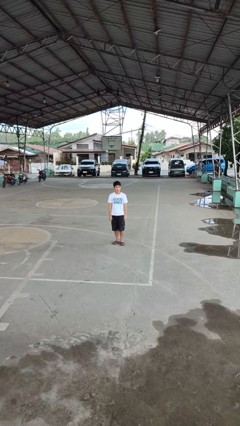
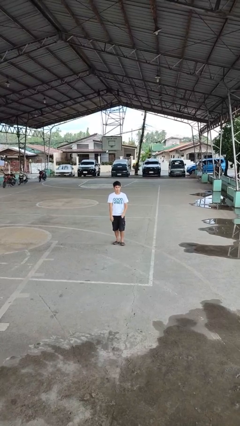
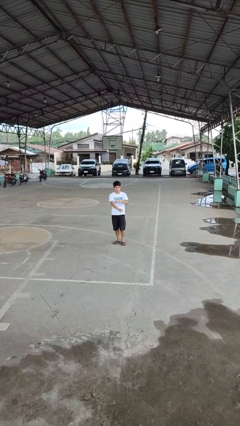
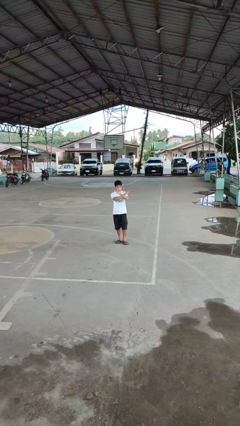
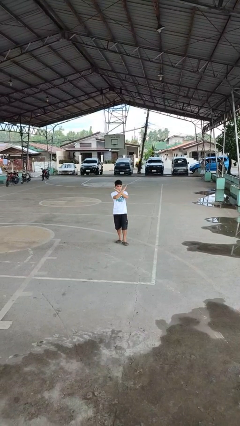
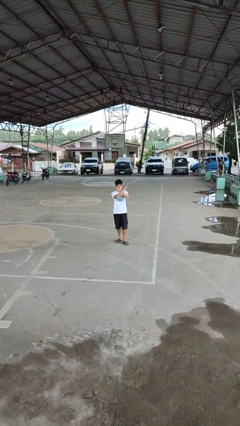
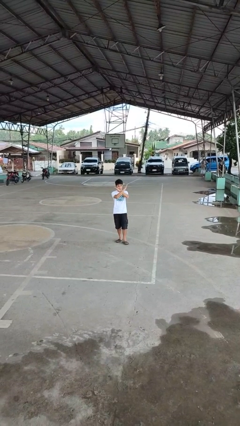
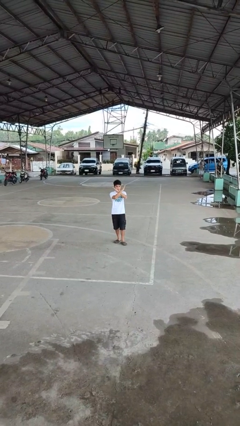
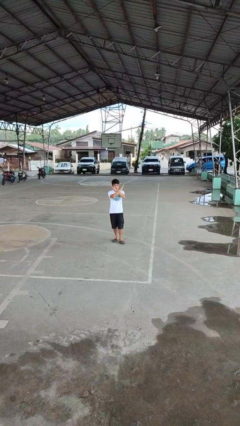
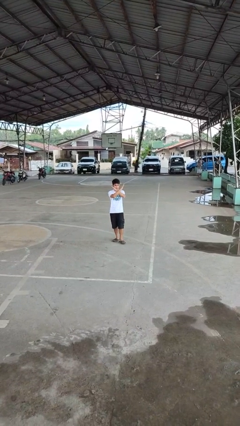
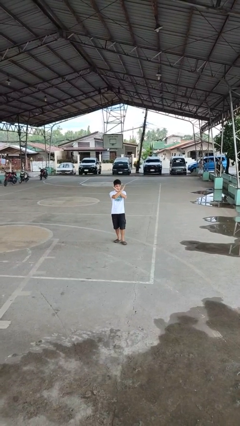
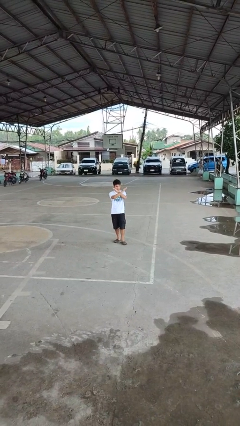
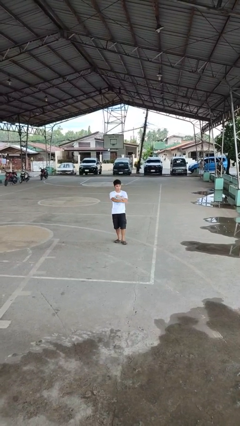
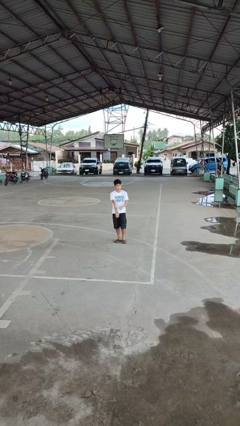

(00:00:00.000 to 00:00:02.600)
person gestures arms x

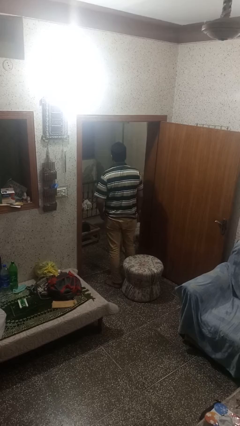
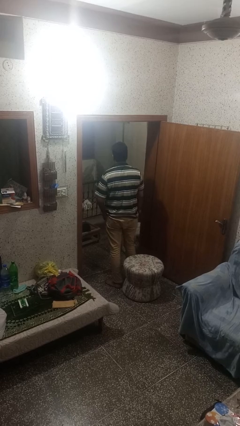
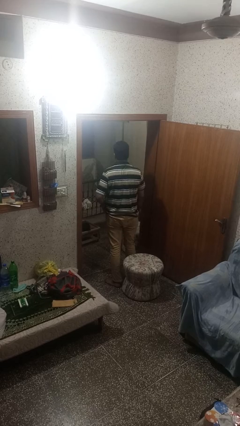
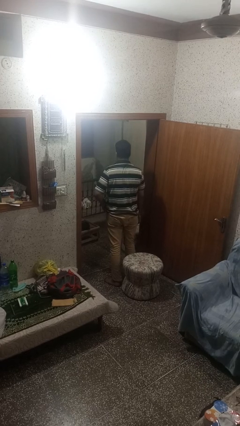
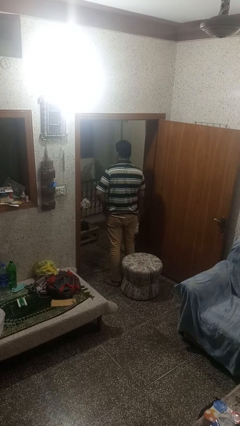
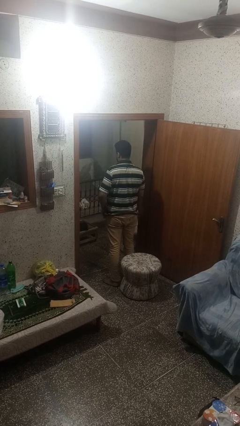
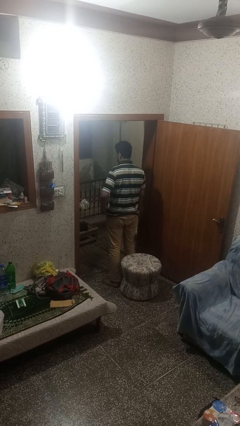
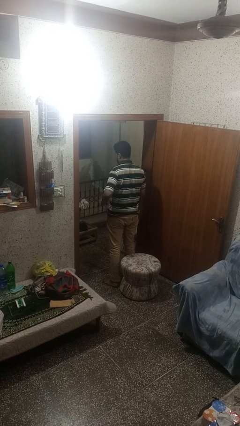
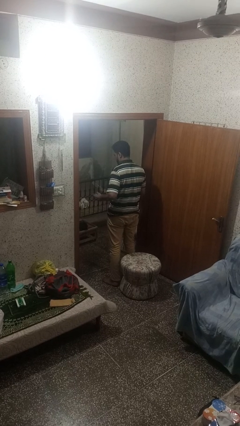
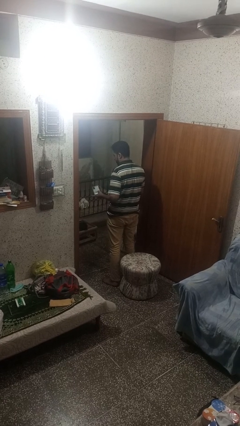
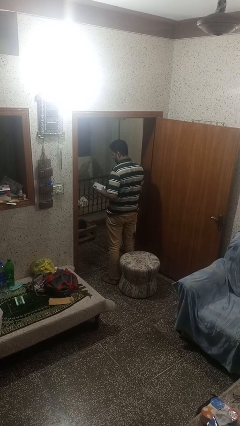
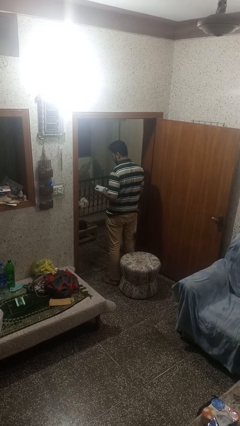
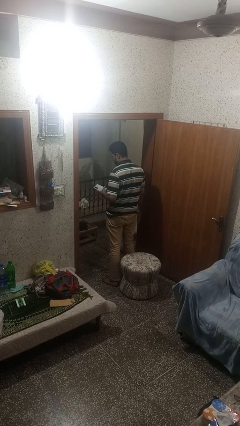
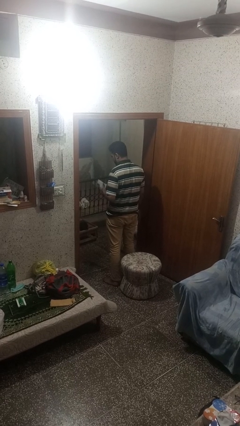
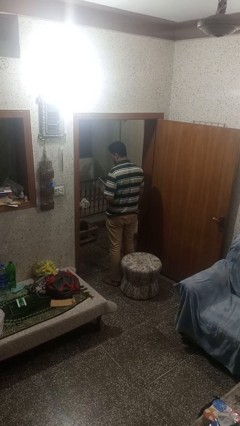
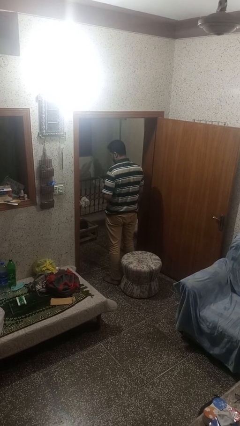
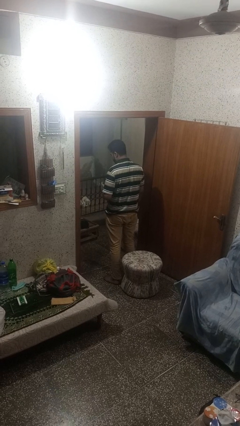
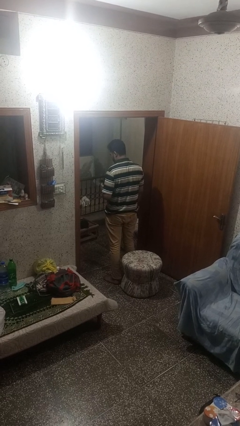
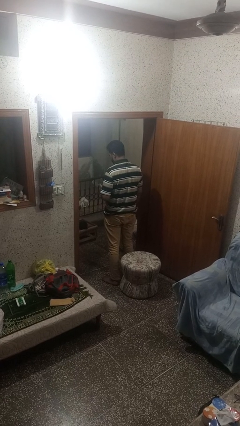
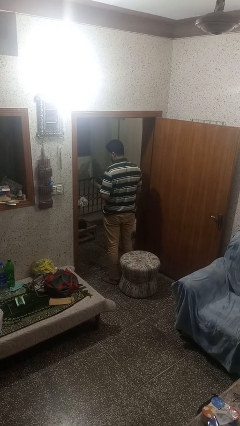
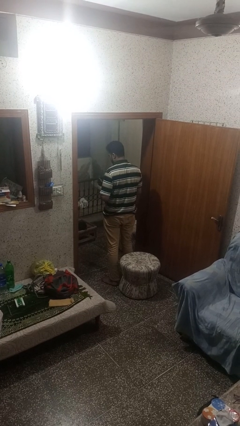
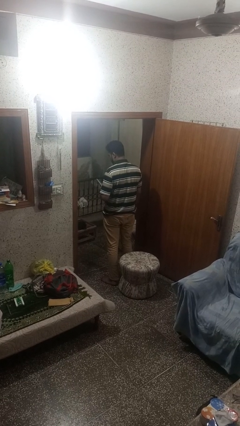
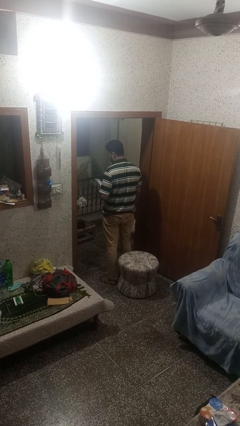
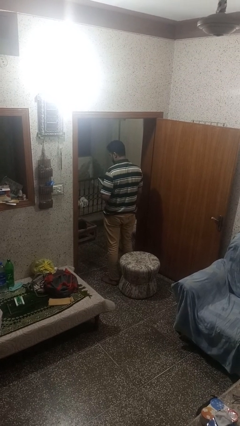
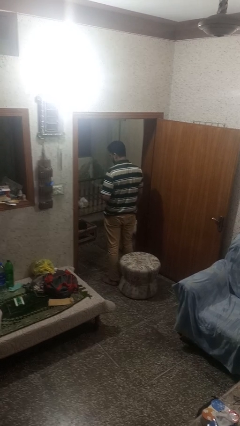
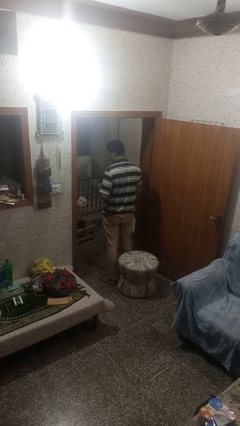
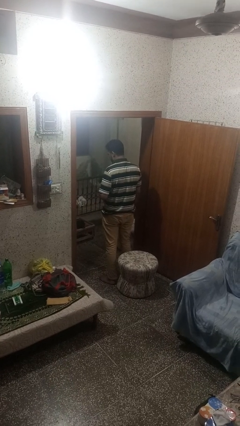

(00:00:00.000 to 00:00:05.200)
person takes phone from pocket

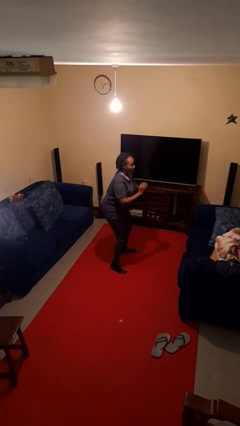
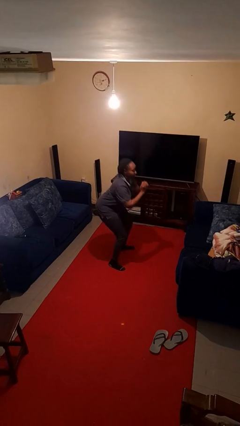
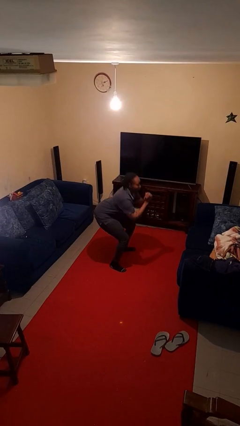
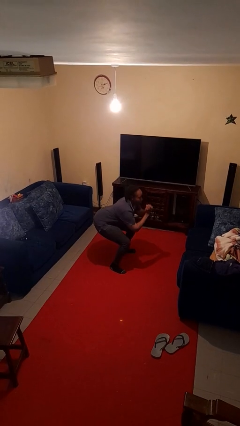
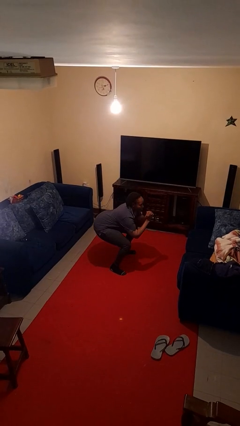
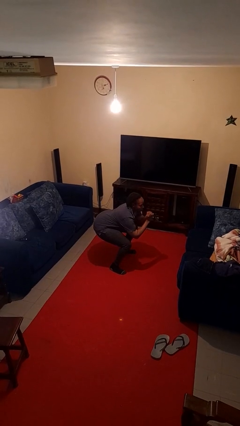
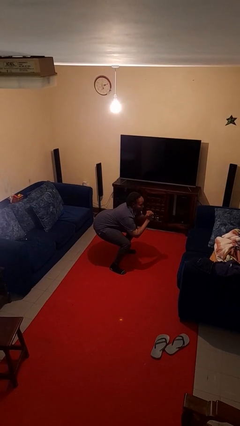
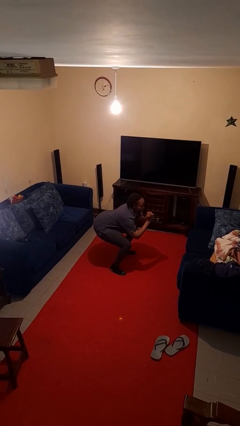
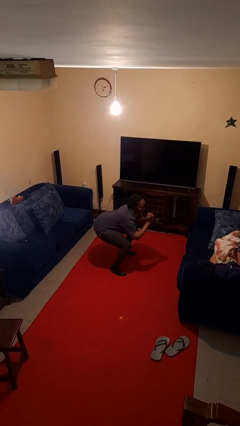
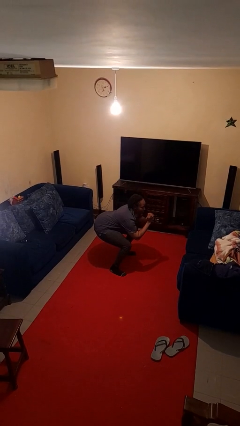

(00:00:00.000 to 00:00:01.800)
person squats

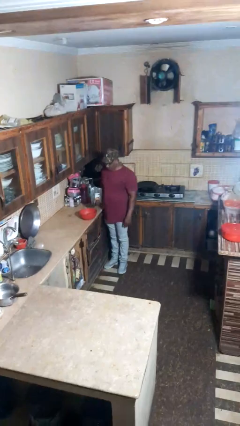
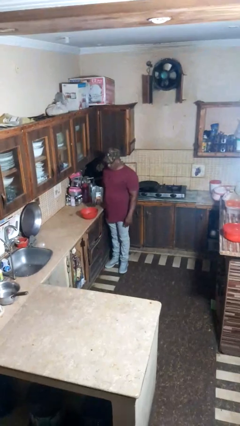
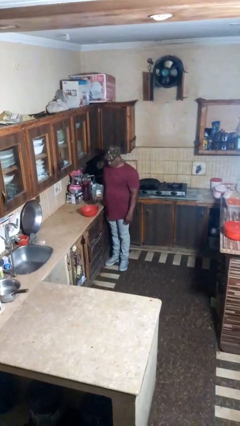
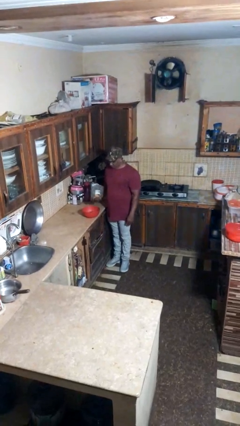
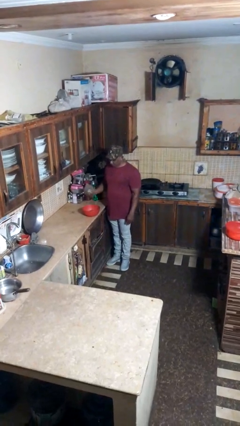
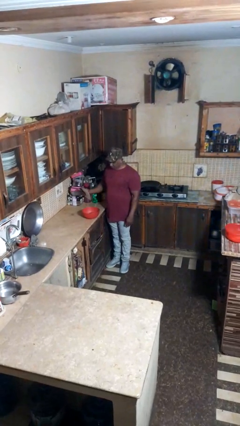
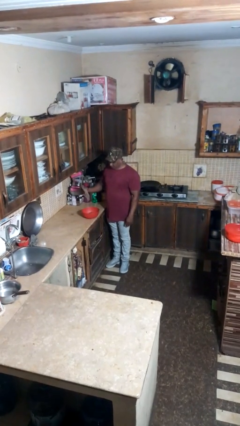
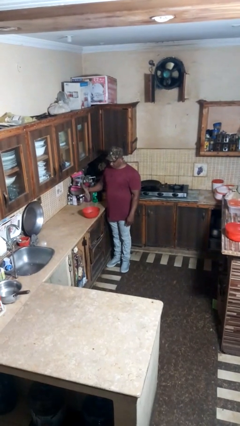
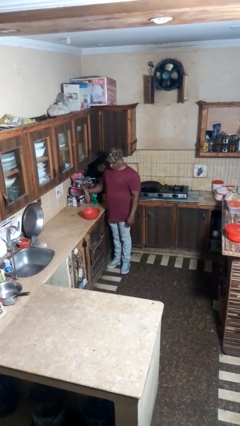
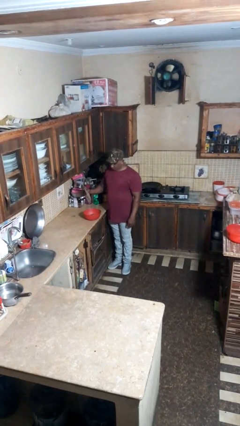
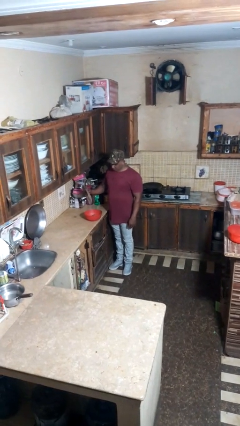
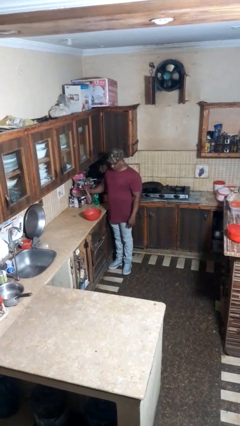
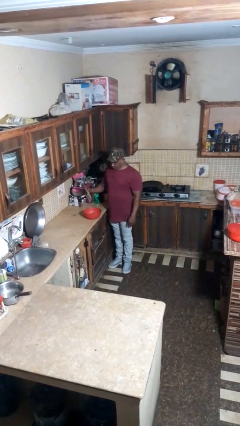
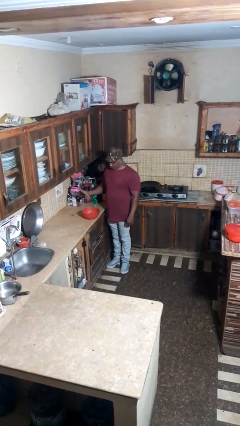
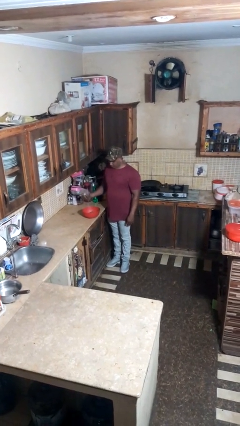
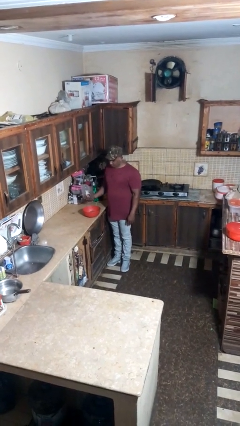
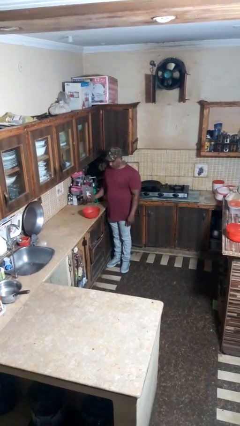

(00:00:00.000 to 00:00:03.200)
person pours into bowl

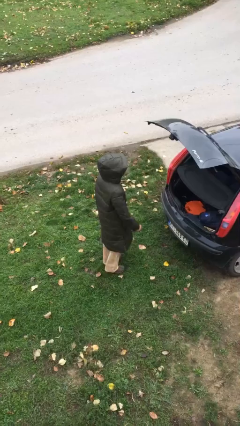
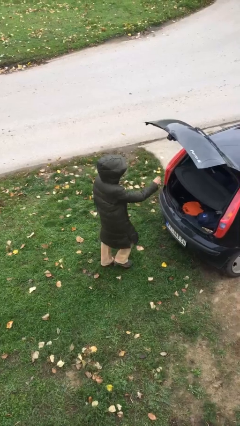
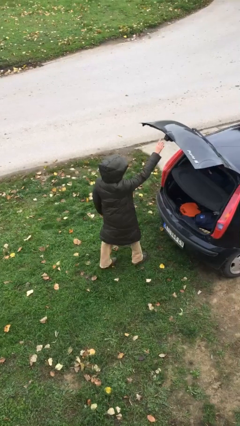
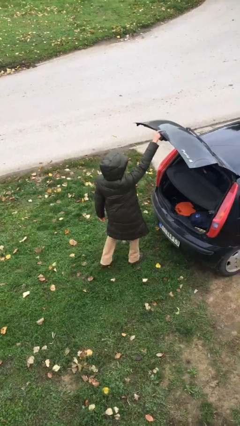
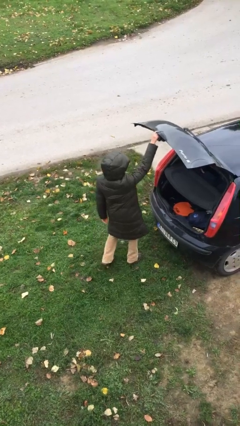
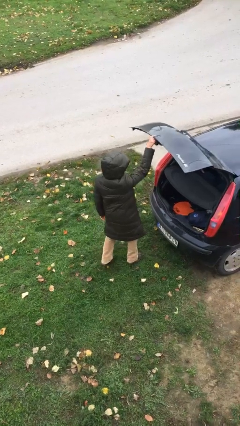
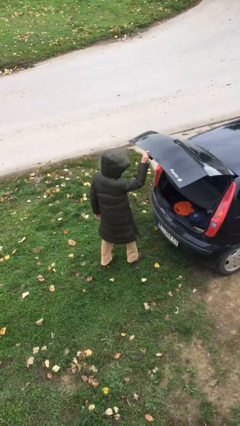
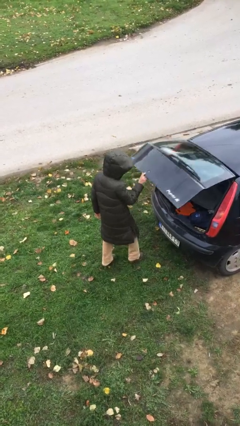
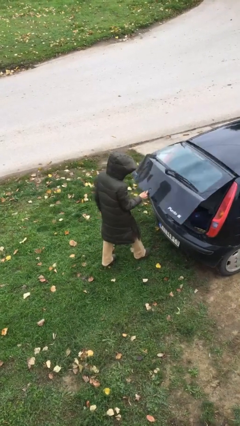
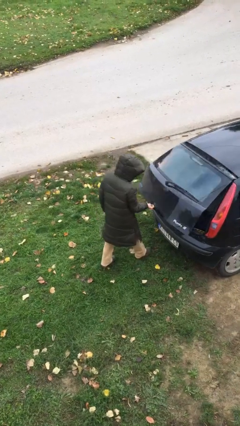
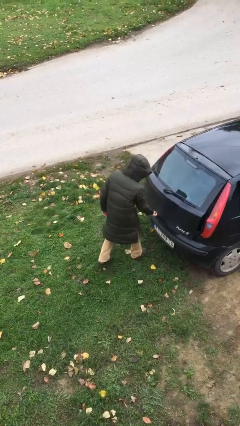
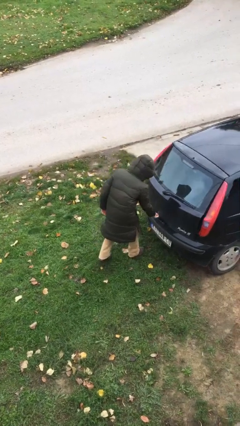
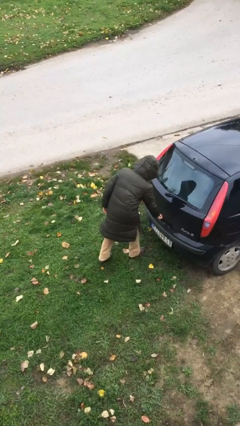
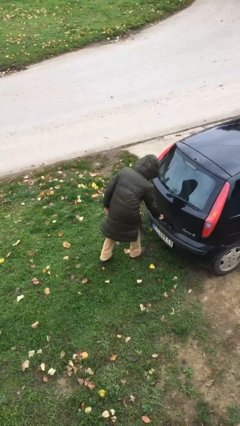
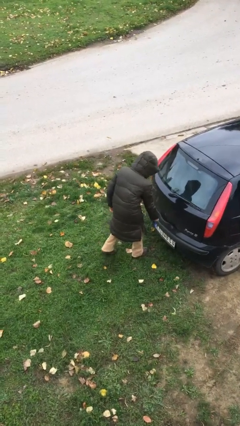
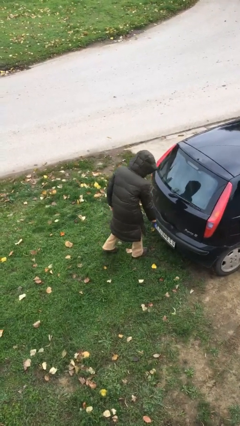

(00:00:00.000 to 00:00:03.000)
person closes car trunk

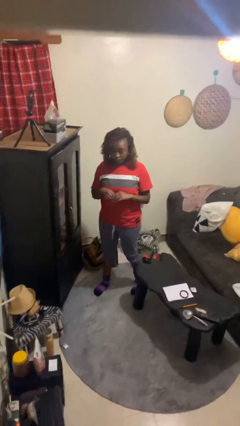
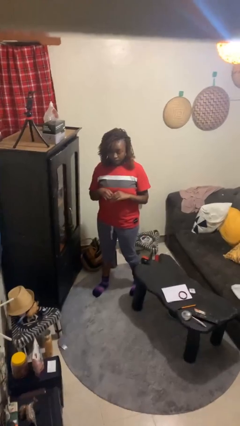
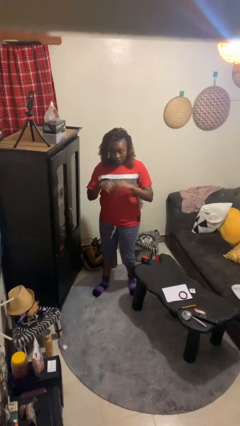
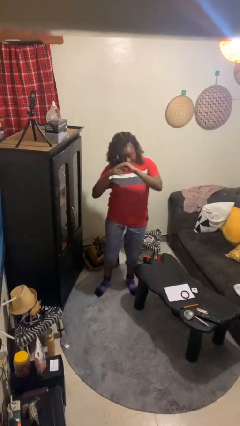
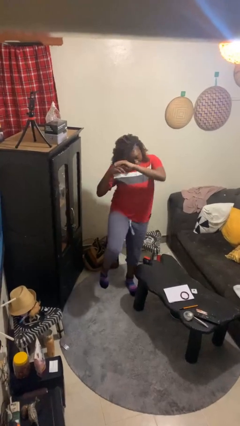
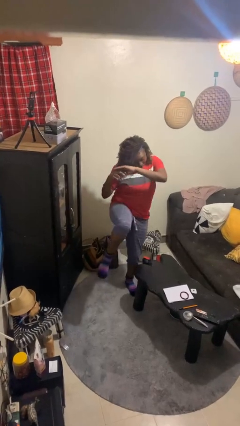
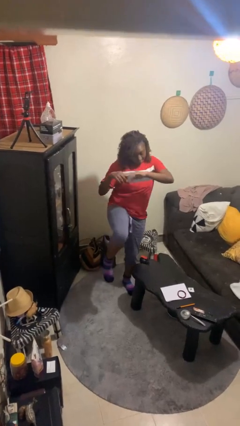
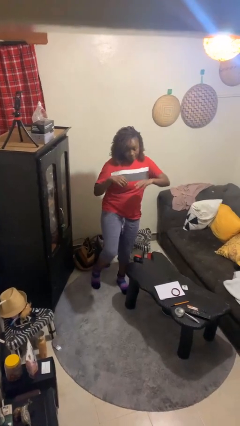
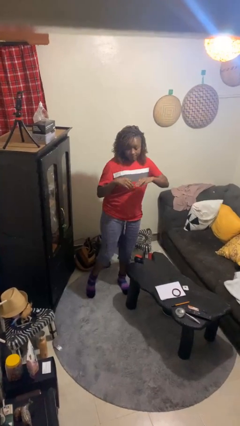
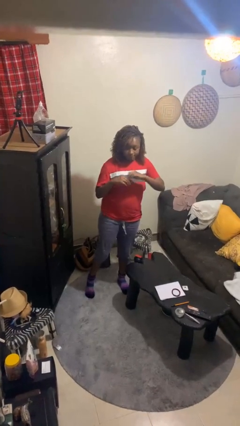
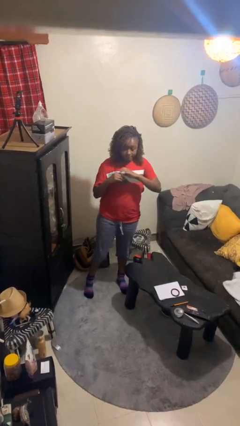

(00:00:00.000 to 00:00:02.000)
person karate kicks
